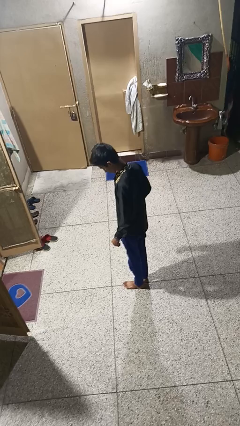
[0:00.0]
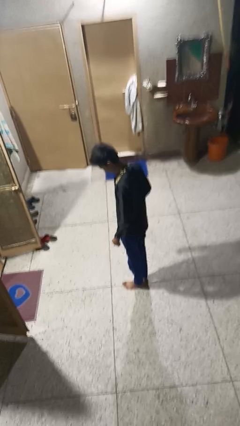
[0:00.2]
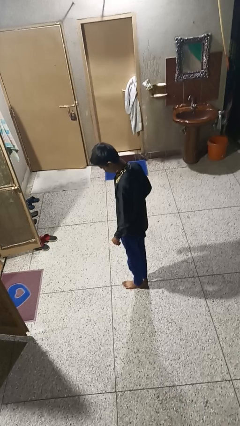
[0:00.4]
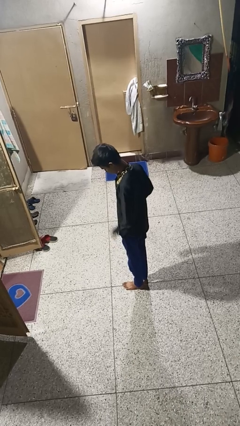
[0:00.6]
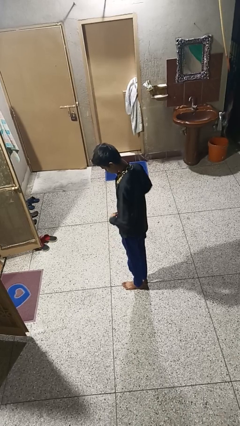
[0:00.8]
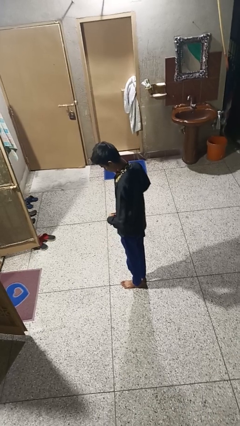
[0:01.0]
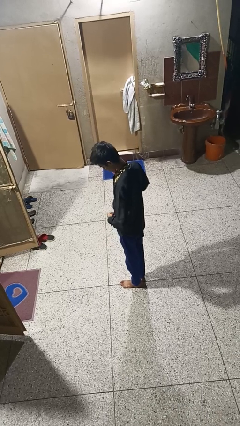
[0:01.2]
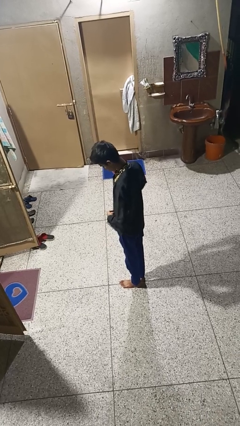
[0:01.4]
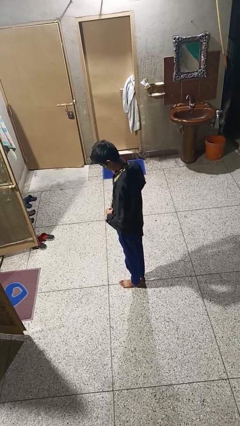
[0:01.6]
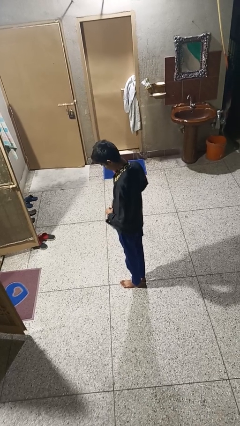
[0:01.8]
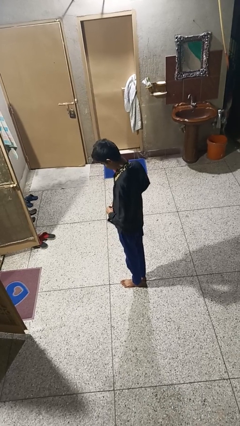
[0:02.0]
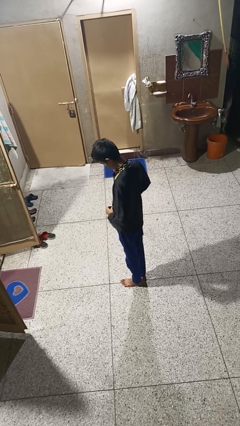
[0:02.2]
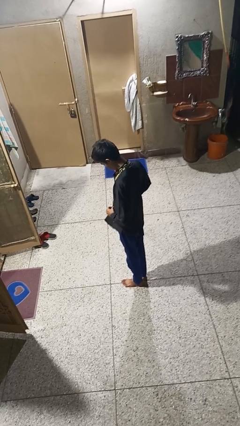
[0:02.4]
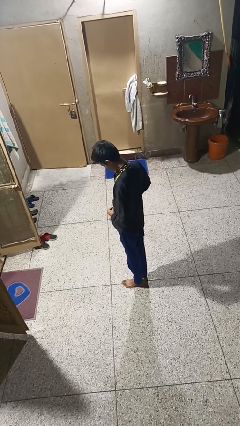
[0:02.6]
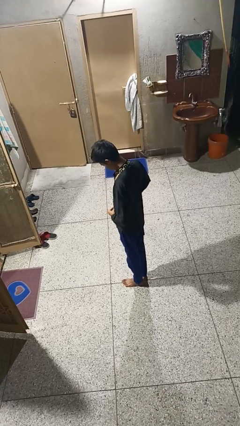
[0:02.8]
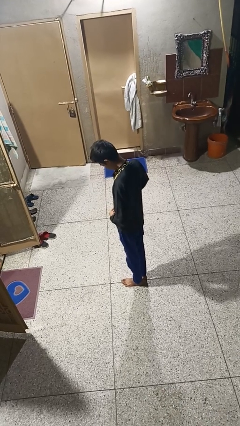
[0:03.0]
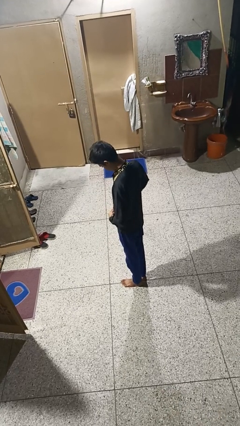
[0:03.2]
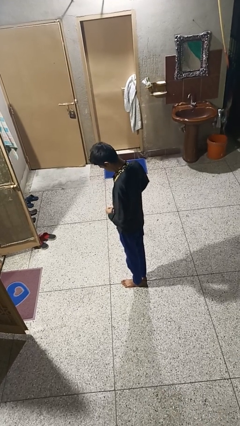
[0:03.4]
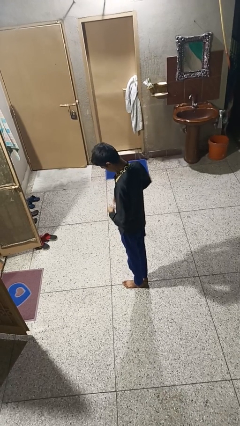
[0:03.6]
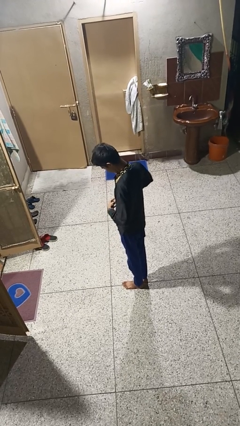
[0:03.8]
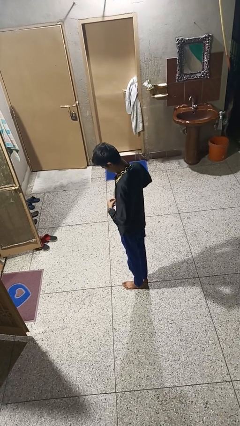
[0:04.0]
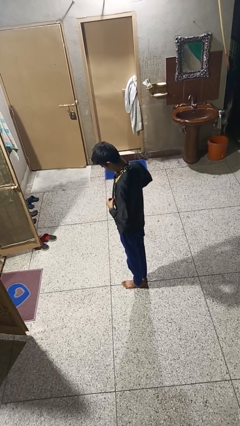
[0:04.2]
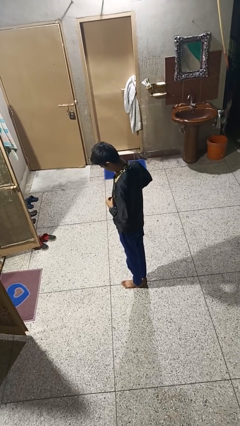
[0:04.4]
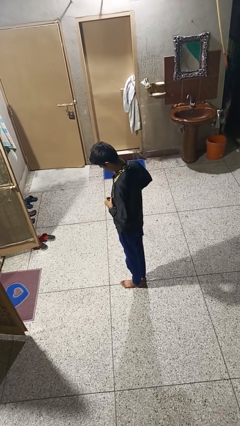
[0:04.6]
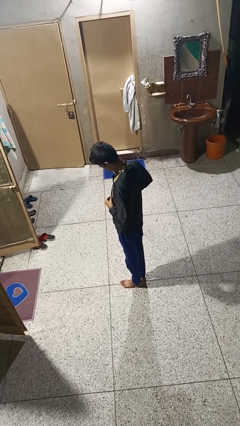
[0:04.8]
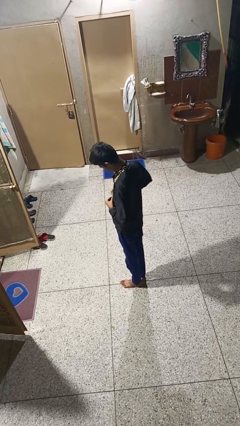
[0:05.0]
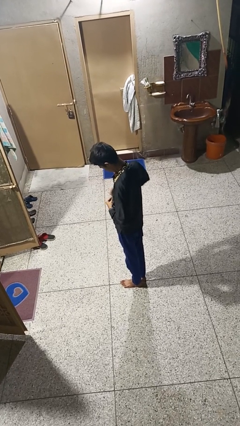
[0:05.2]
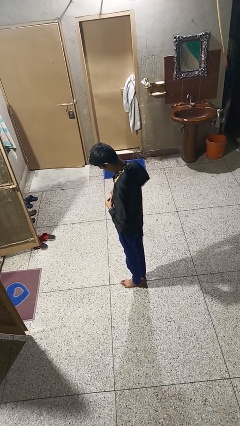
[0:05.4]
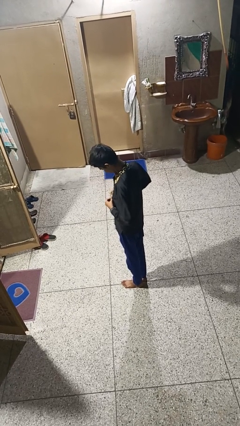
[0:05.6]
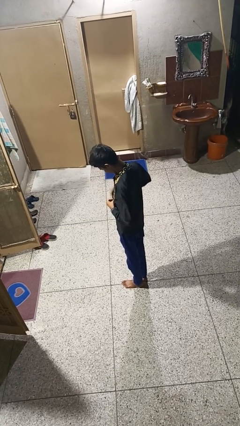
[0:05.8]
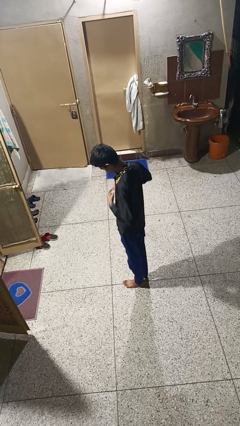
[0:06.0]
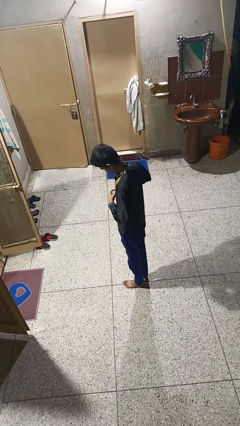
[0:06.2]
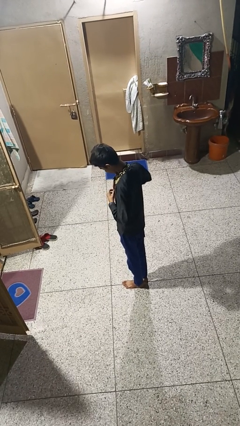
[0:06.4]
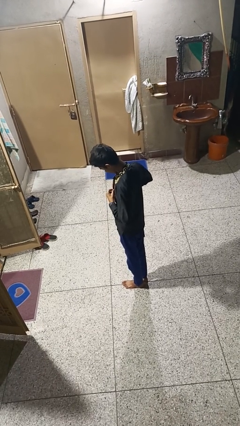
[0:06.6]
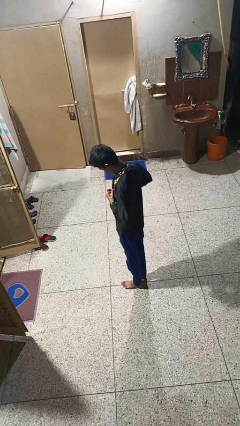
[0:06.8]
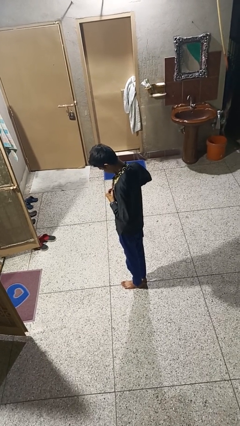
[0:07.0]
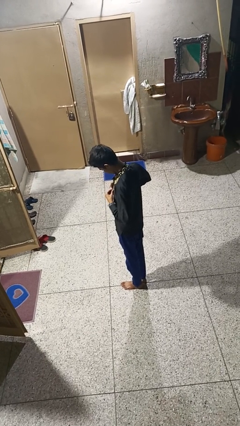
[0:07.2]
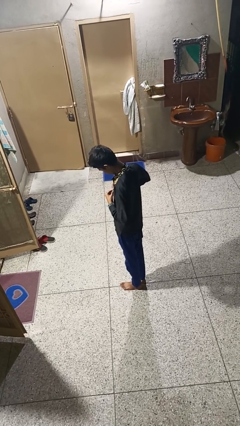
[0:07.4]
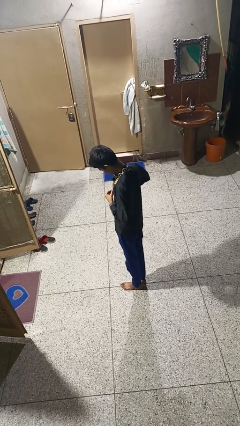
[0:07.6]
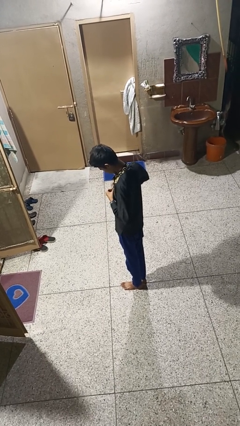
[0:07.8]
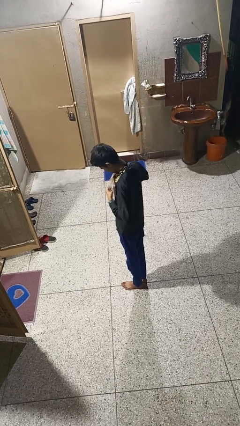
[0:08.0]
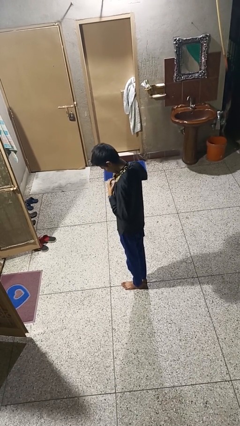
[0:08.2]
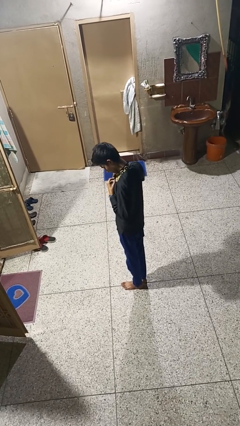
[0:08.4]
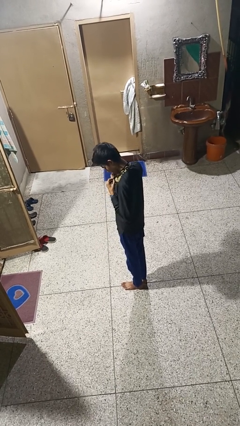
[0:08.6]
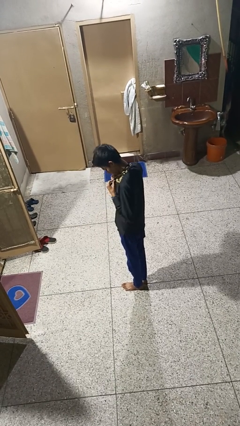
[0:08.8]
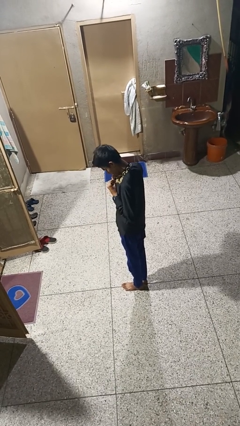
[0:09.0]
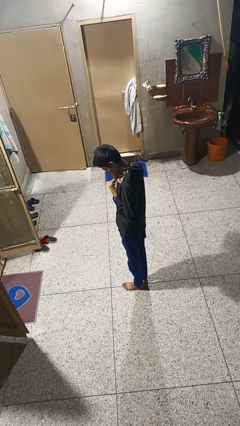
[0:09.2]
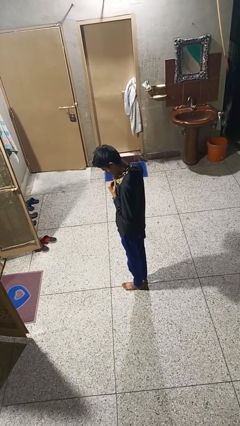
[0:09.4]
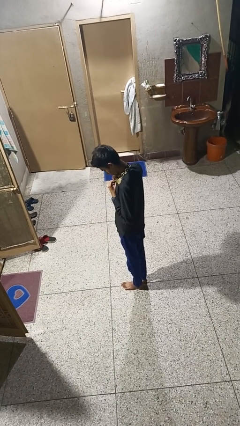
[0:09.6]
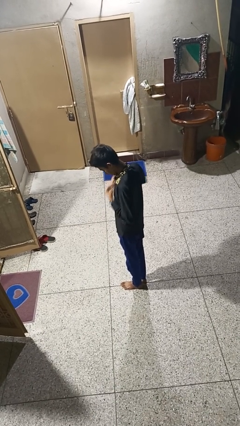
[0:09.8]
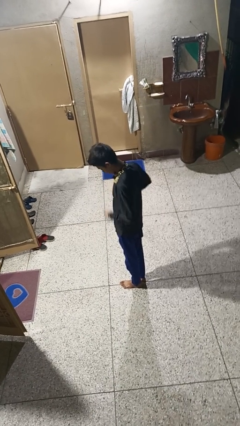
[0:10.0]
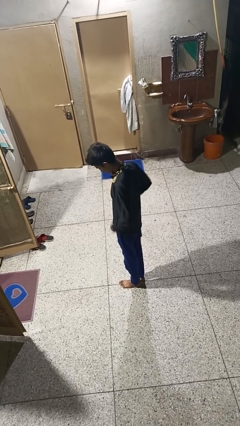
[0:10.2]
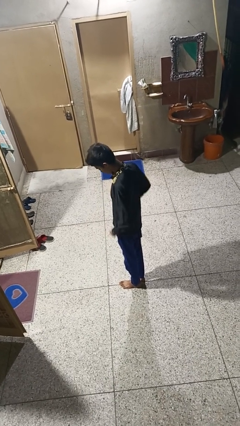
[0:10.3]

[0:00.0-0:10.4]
person buttons shirt

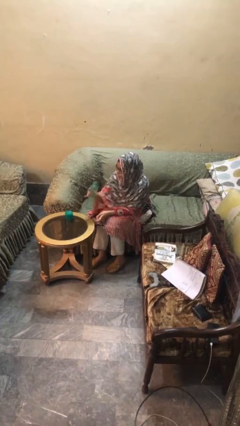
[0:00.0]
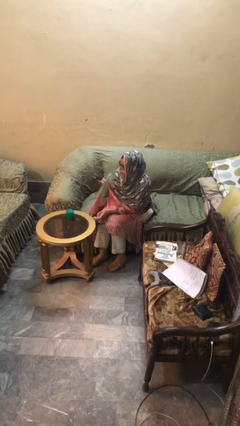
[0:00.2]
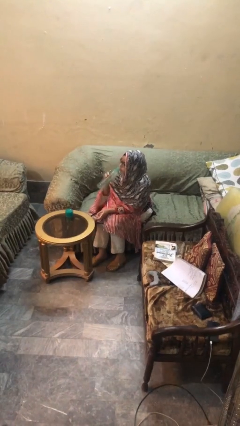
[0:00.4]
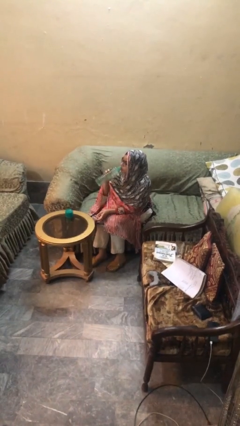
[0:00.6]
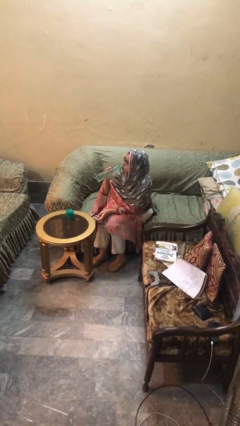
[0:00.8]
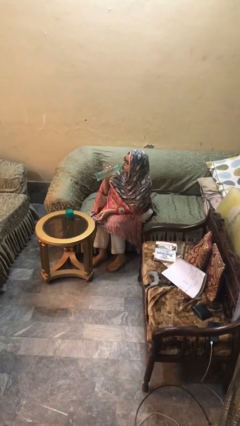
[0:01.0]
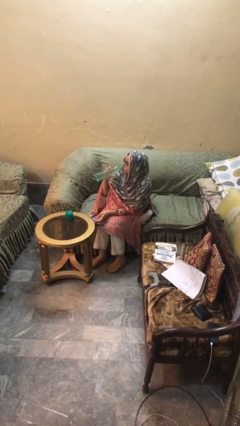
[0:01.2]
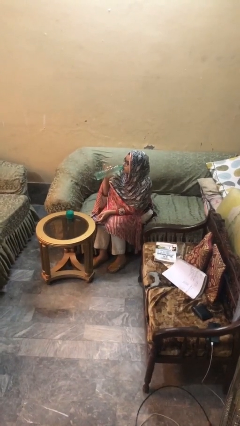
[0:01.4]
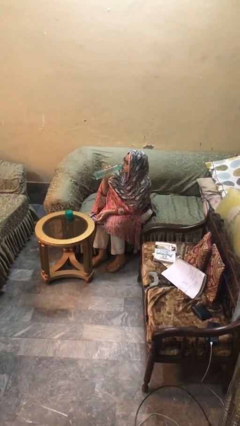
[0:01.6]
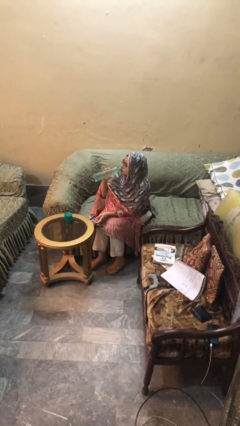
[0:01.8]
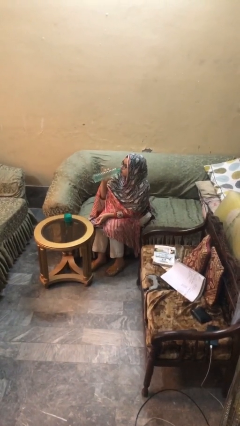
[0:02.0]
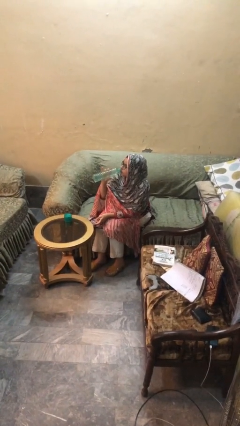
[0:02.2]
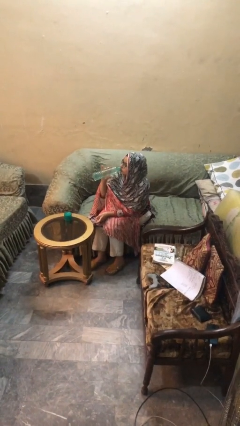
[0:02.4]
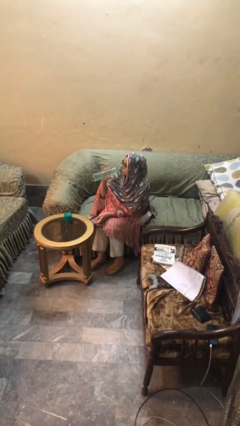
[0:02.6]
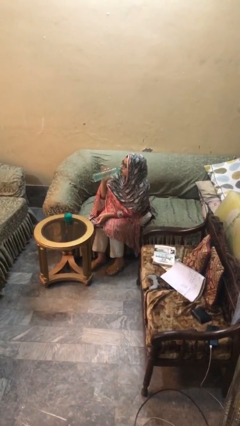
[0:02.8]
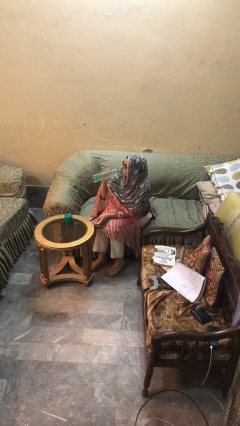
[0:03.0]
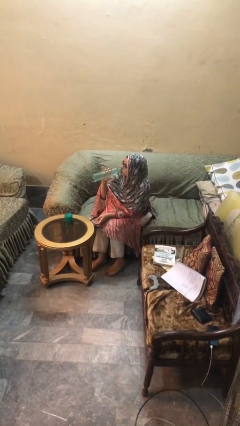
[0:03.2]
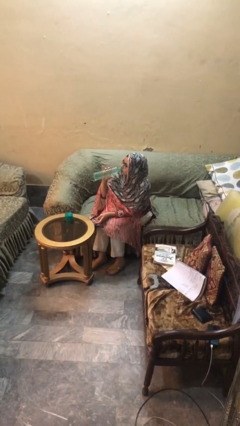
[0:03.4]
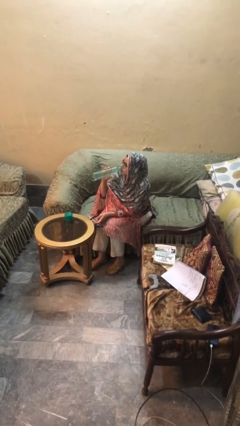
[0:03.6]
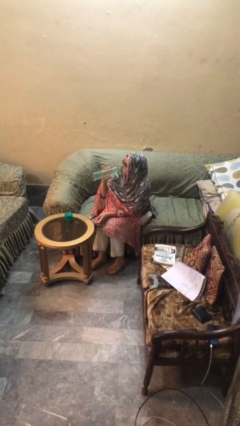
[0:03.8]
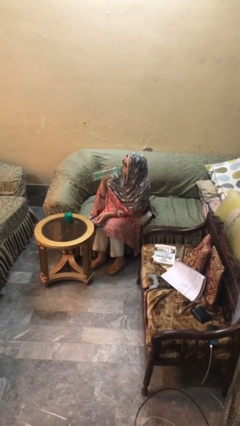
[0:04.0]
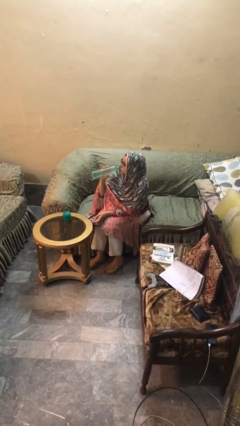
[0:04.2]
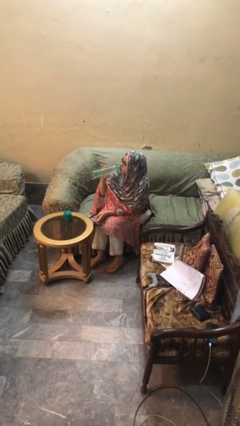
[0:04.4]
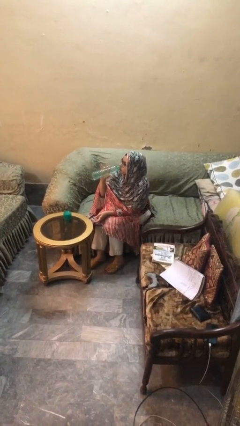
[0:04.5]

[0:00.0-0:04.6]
person drinks from bottle

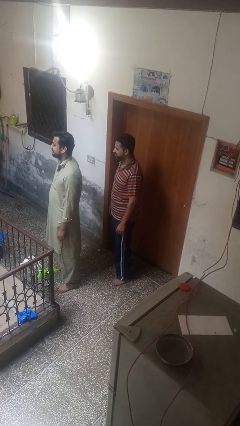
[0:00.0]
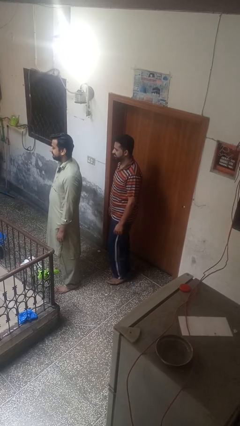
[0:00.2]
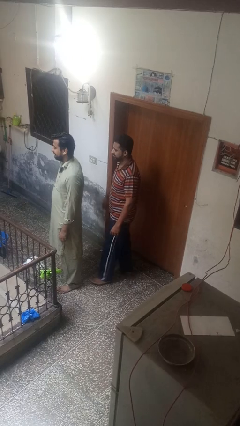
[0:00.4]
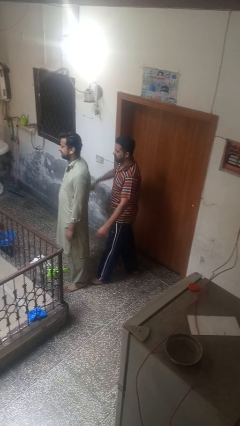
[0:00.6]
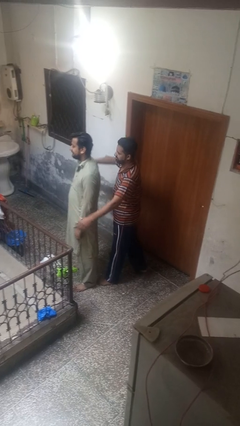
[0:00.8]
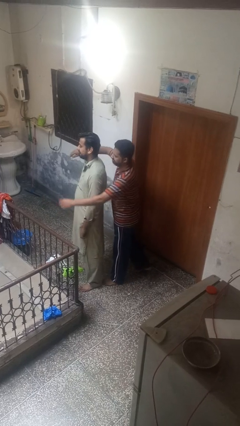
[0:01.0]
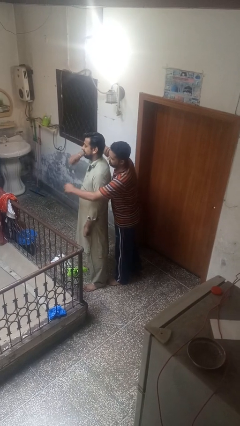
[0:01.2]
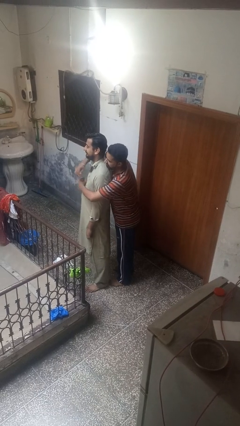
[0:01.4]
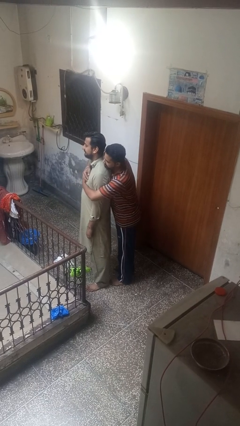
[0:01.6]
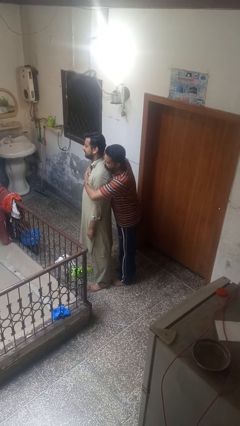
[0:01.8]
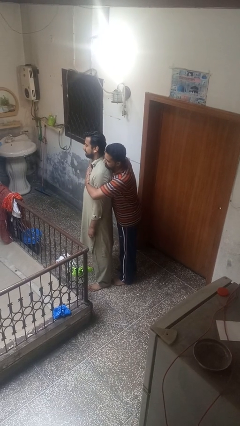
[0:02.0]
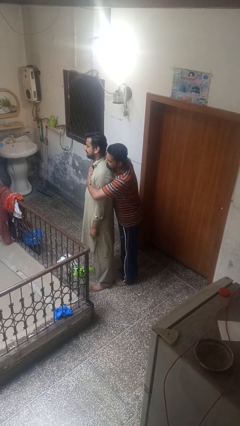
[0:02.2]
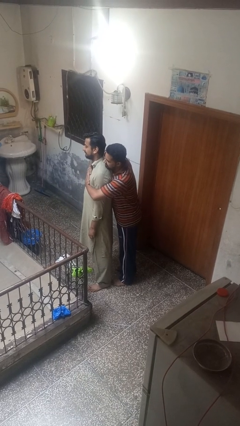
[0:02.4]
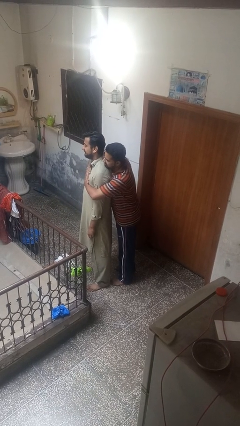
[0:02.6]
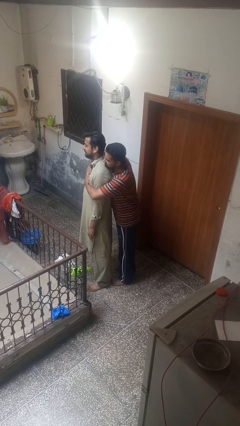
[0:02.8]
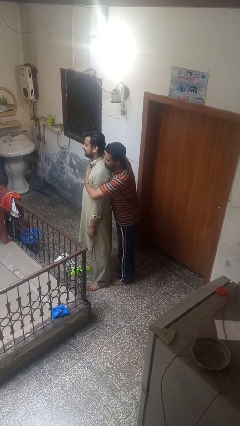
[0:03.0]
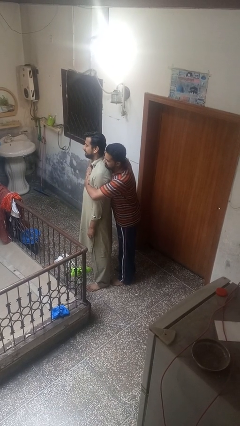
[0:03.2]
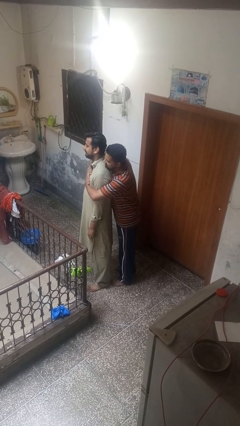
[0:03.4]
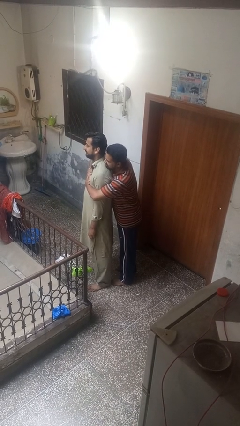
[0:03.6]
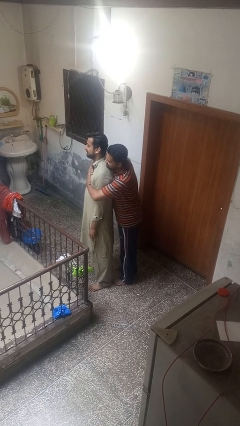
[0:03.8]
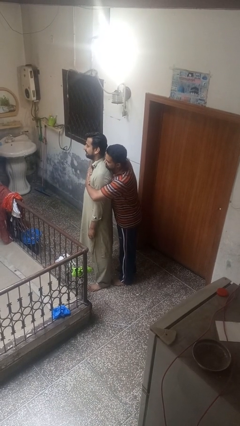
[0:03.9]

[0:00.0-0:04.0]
person hugs person from behind
